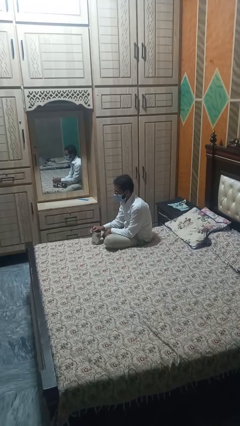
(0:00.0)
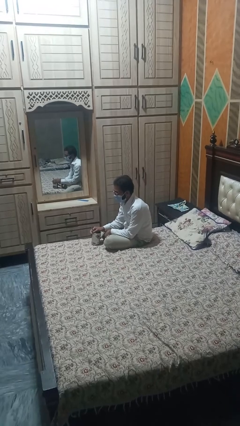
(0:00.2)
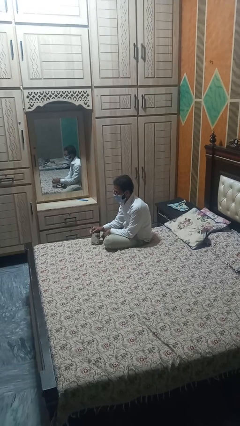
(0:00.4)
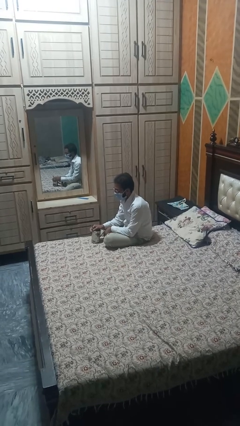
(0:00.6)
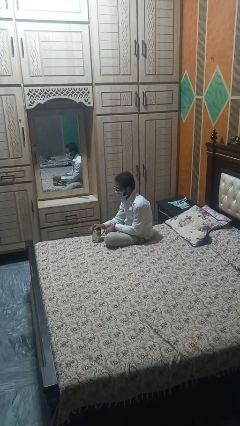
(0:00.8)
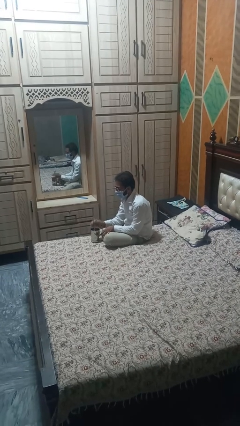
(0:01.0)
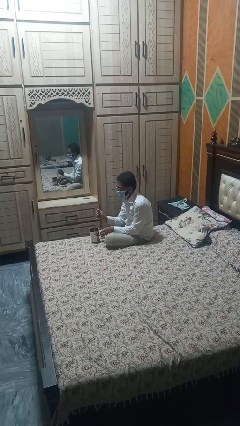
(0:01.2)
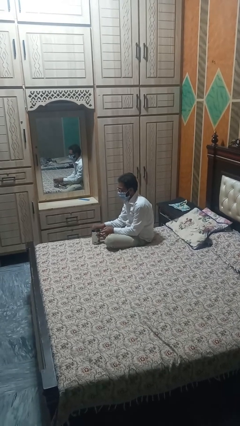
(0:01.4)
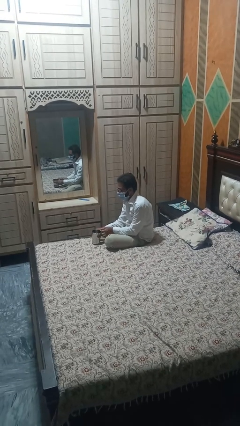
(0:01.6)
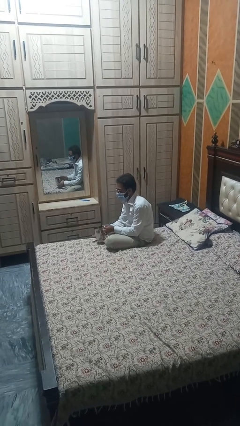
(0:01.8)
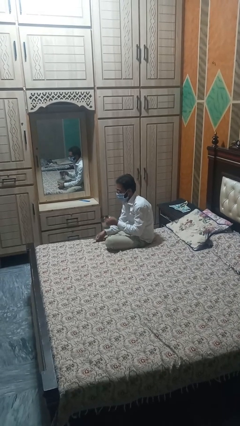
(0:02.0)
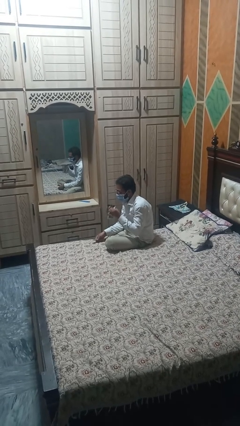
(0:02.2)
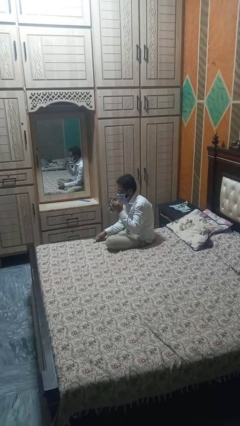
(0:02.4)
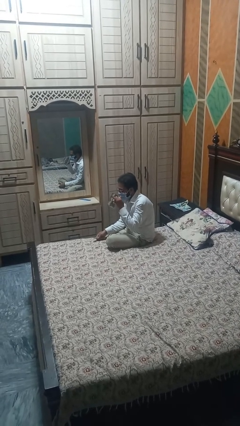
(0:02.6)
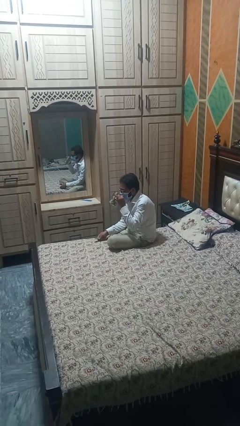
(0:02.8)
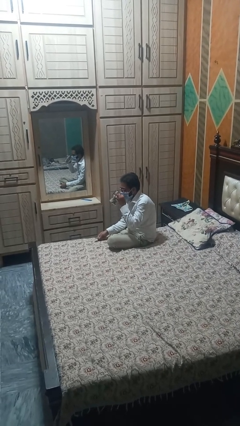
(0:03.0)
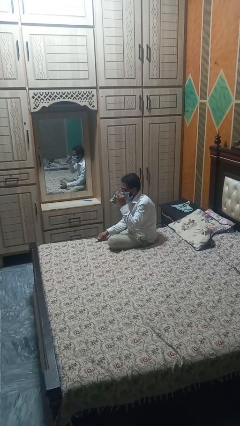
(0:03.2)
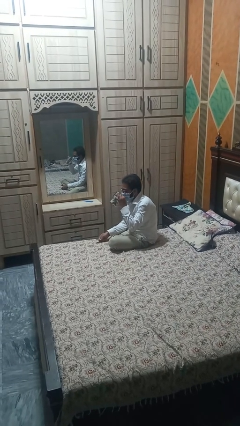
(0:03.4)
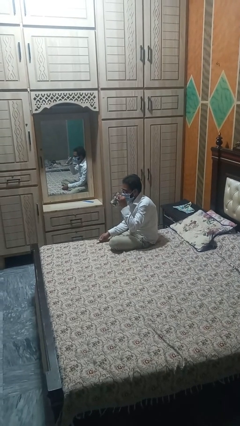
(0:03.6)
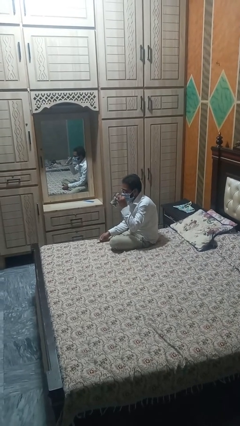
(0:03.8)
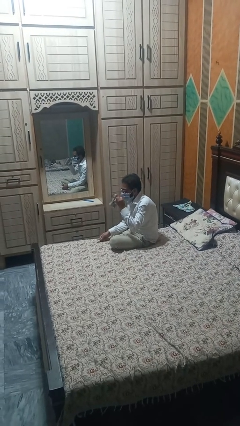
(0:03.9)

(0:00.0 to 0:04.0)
person drinks from mug

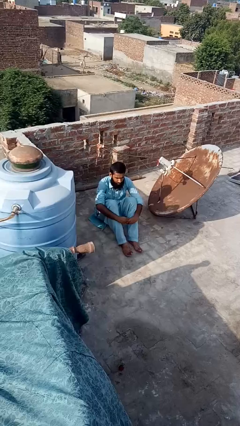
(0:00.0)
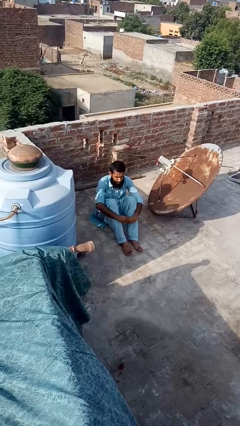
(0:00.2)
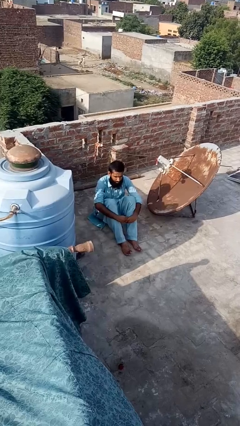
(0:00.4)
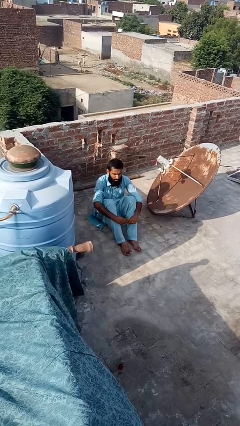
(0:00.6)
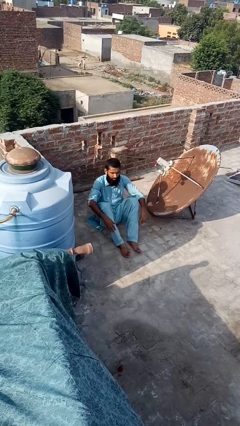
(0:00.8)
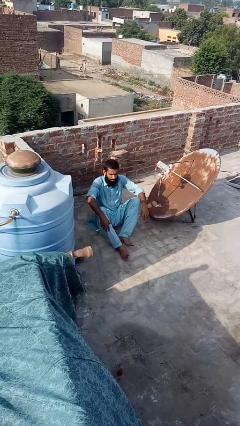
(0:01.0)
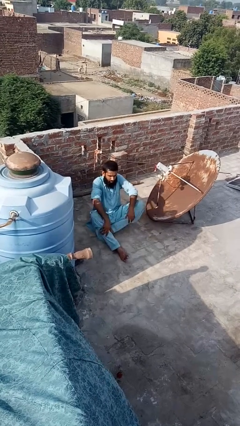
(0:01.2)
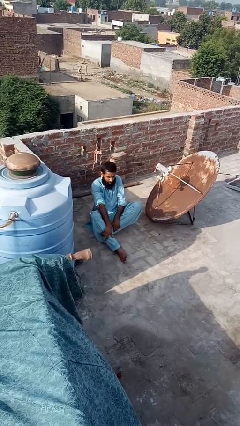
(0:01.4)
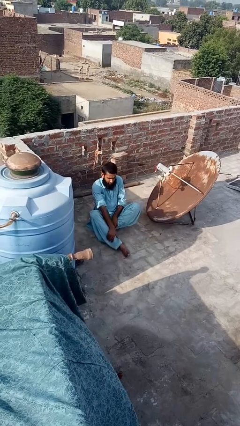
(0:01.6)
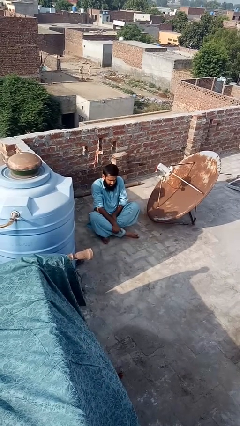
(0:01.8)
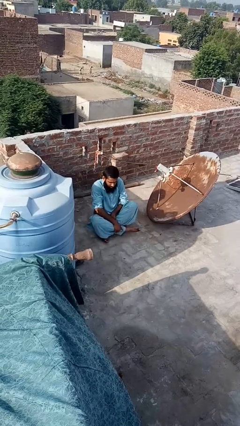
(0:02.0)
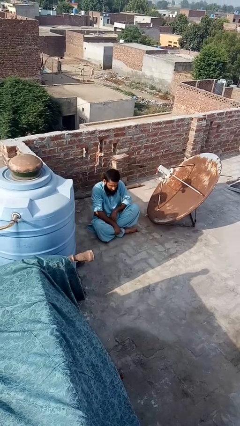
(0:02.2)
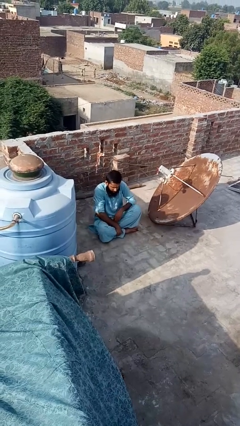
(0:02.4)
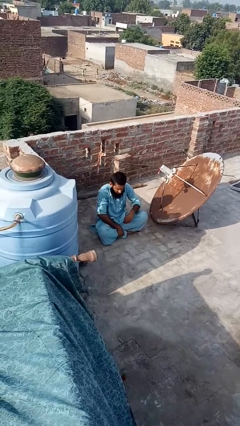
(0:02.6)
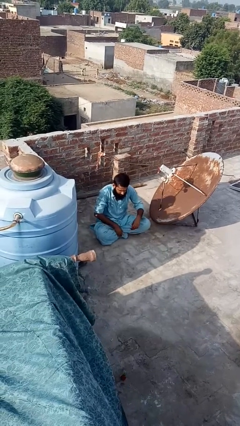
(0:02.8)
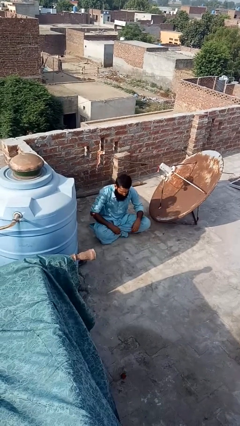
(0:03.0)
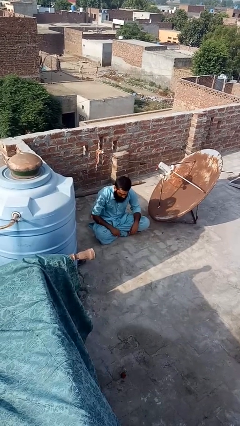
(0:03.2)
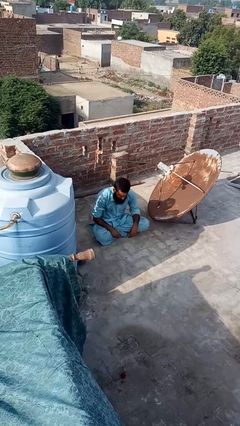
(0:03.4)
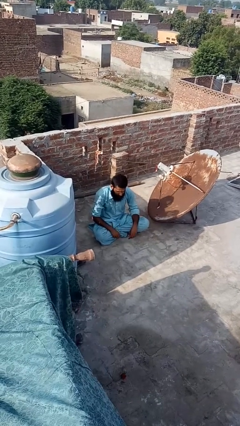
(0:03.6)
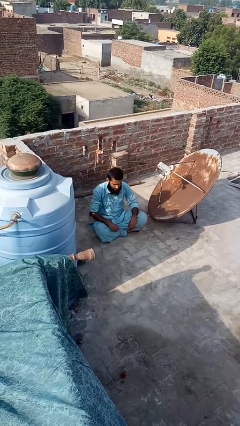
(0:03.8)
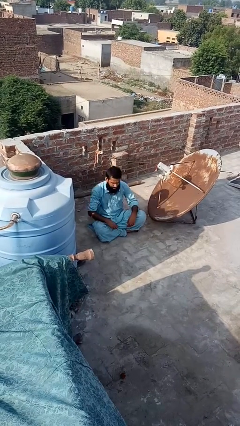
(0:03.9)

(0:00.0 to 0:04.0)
person crosses legs

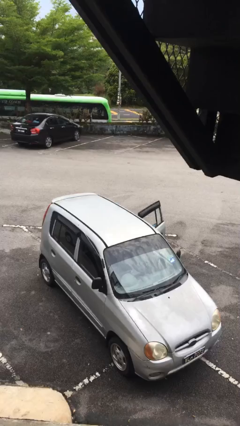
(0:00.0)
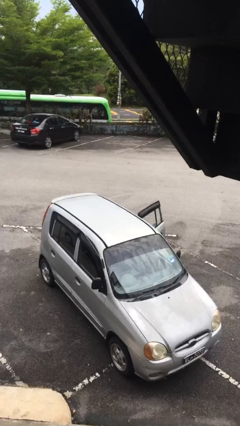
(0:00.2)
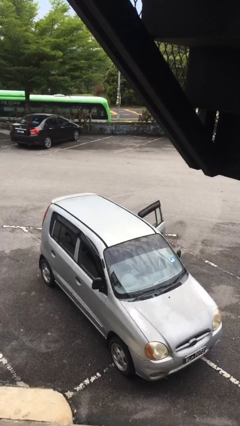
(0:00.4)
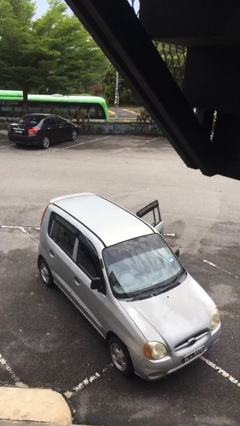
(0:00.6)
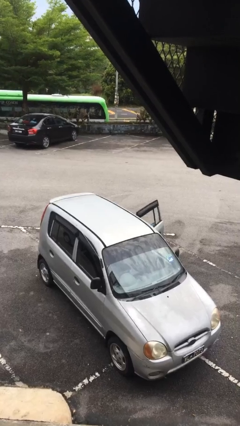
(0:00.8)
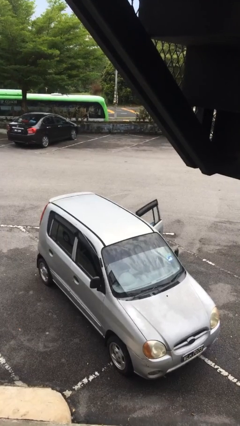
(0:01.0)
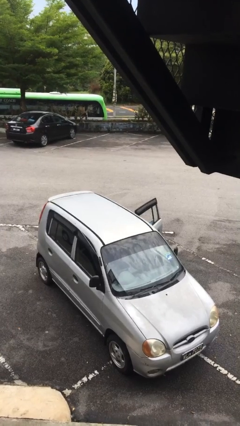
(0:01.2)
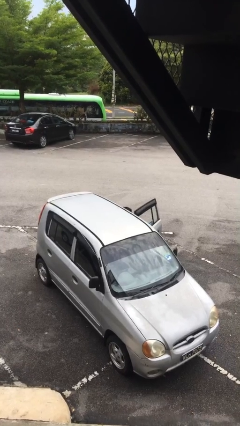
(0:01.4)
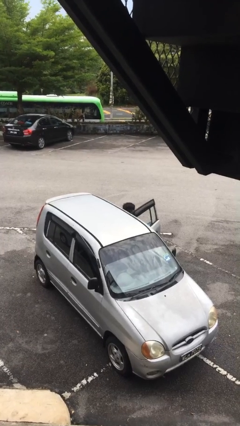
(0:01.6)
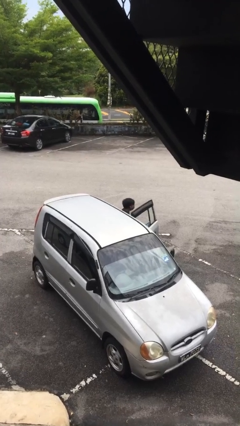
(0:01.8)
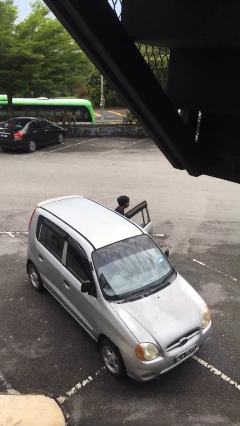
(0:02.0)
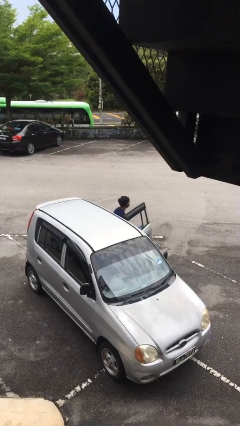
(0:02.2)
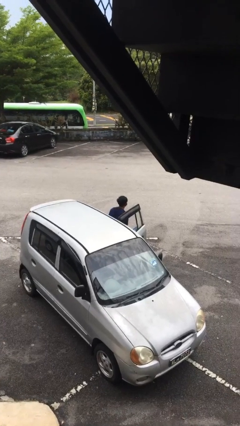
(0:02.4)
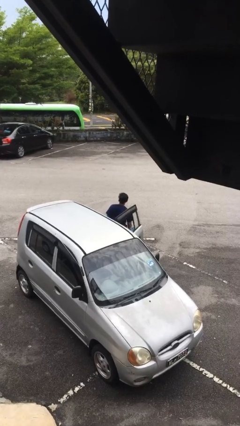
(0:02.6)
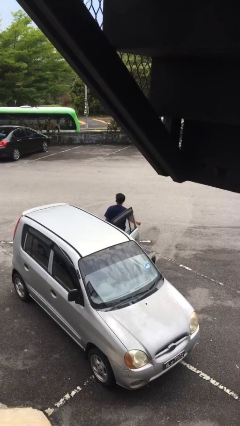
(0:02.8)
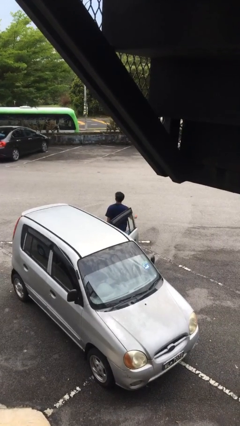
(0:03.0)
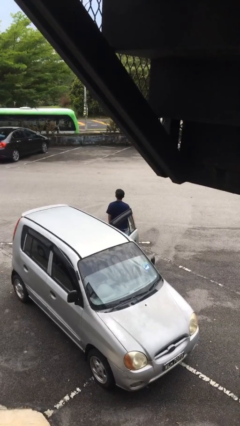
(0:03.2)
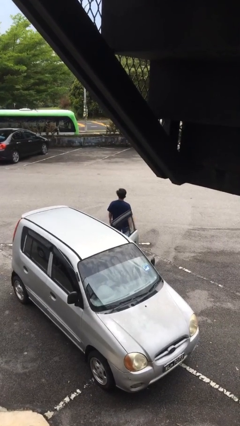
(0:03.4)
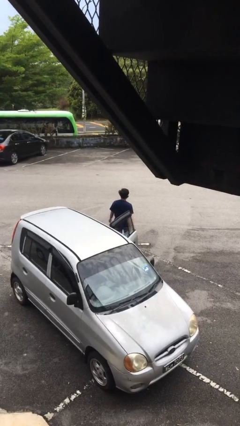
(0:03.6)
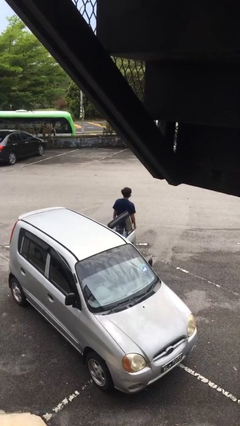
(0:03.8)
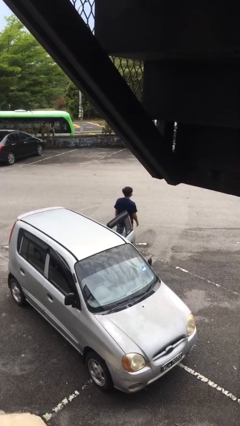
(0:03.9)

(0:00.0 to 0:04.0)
person exits car

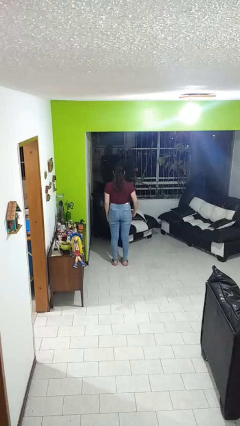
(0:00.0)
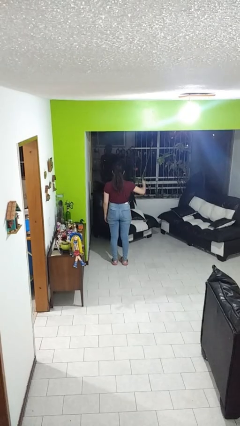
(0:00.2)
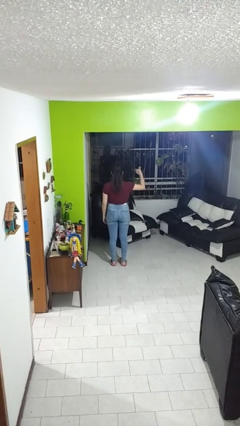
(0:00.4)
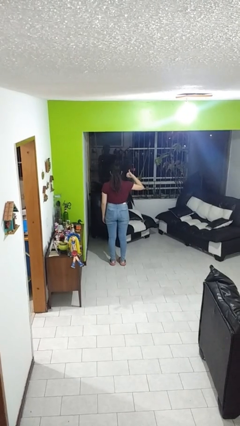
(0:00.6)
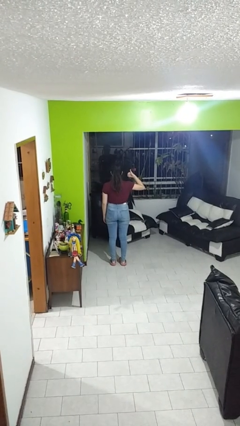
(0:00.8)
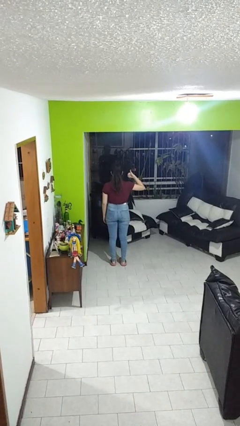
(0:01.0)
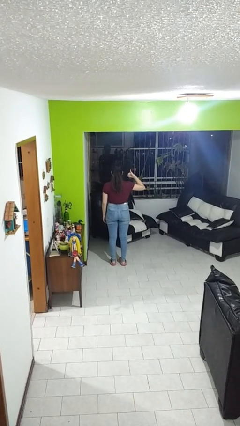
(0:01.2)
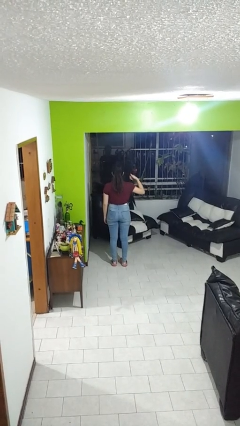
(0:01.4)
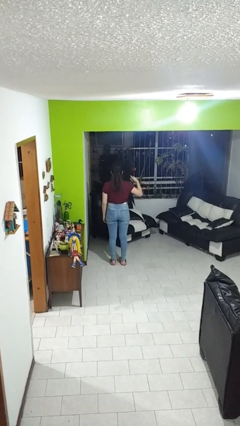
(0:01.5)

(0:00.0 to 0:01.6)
person gestures thumbs up

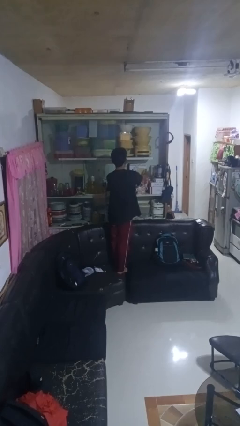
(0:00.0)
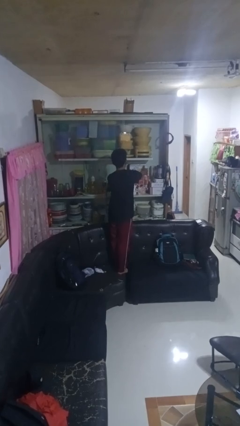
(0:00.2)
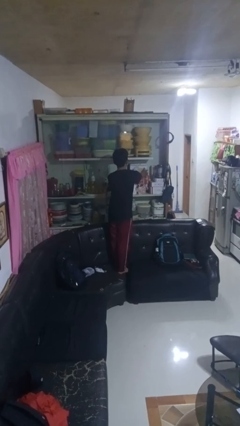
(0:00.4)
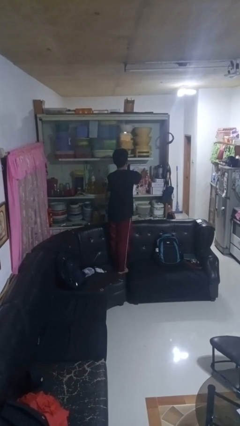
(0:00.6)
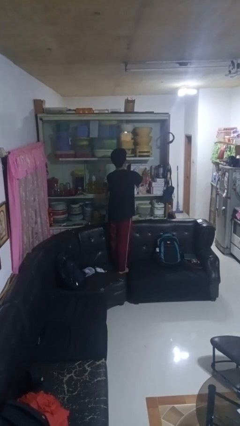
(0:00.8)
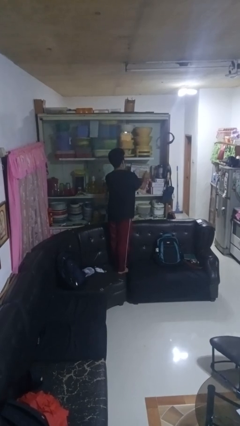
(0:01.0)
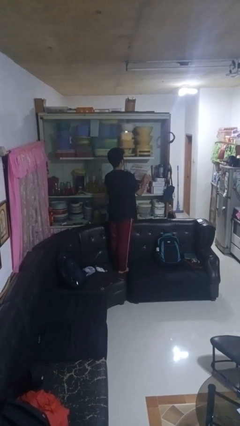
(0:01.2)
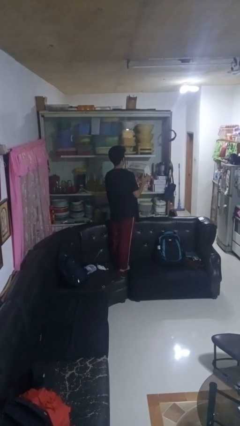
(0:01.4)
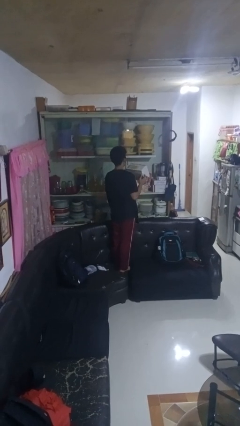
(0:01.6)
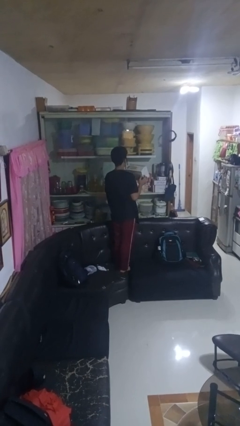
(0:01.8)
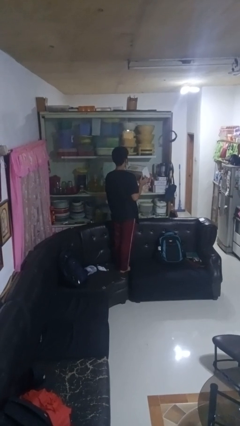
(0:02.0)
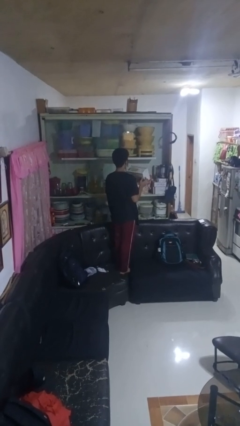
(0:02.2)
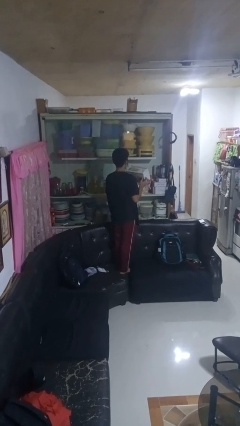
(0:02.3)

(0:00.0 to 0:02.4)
person picks up object from cabinet

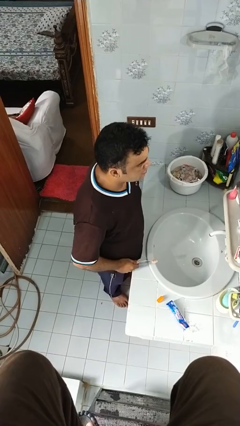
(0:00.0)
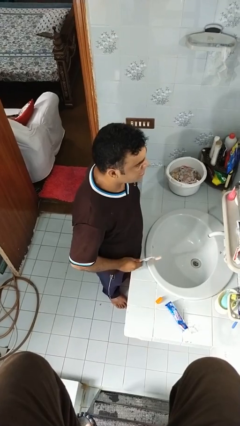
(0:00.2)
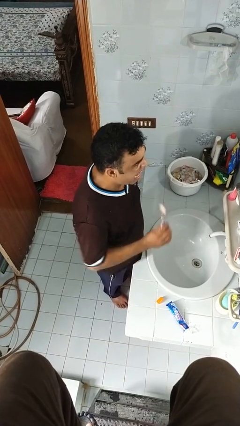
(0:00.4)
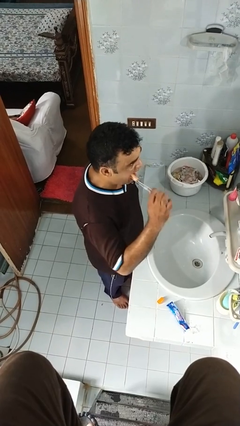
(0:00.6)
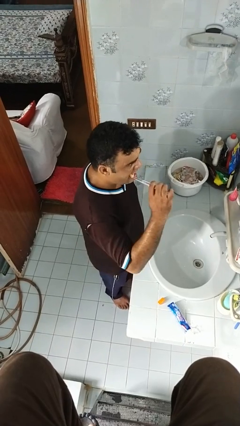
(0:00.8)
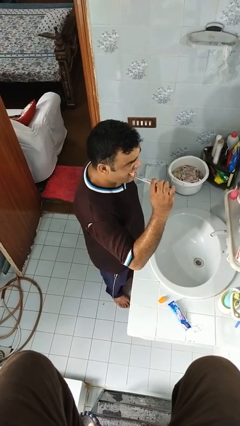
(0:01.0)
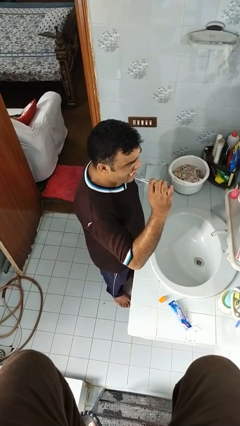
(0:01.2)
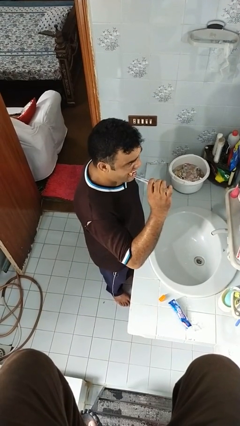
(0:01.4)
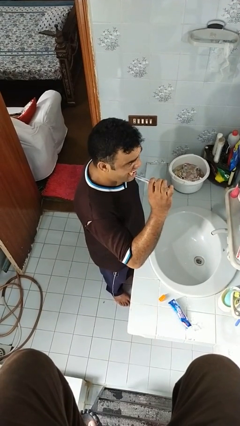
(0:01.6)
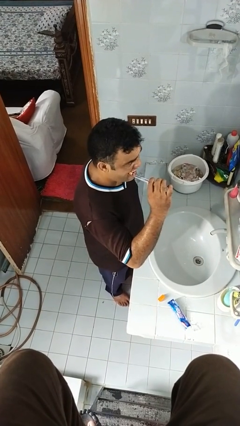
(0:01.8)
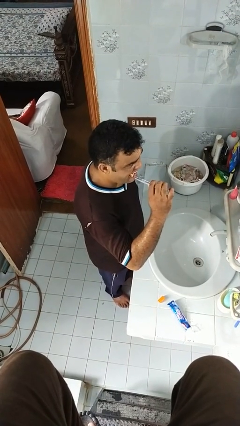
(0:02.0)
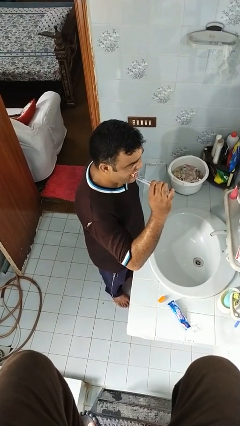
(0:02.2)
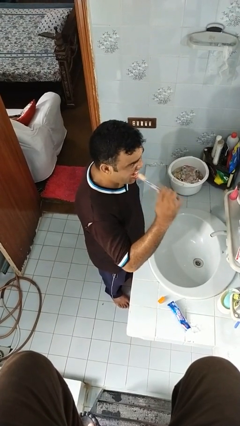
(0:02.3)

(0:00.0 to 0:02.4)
person brushes teeth
